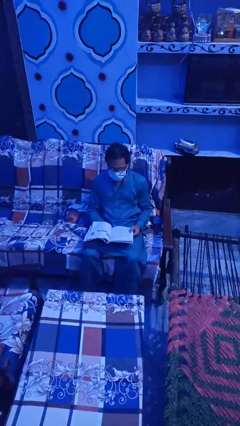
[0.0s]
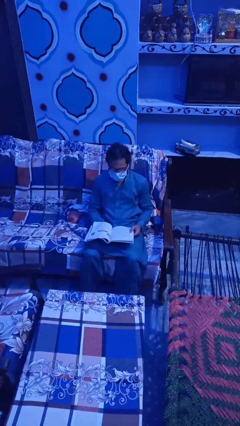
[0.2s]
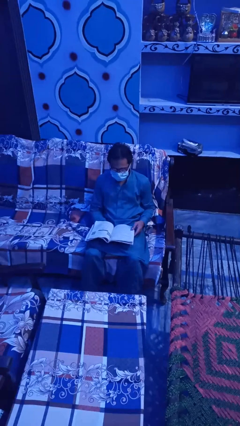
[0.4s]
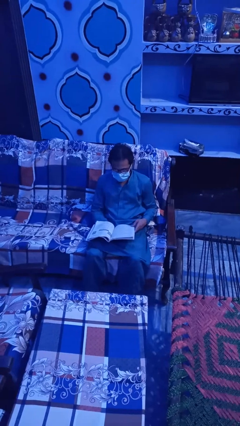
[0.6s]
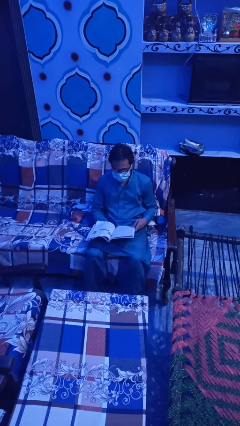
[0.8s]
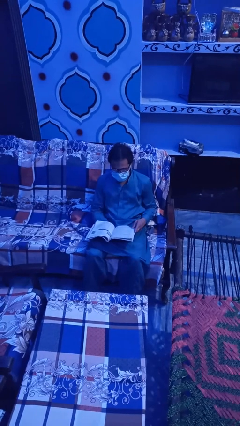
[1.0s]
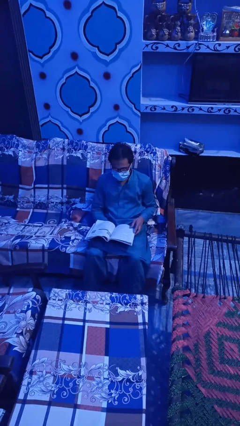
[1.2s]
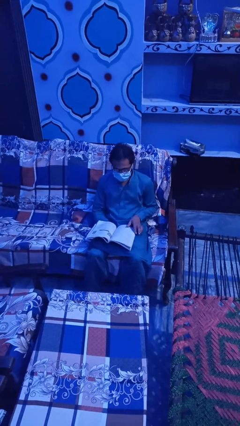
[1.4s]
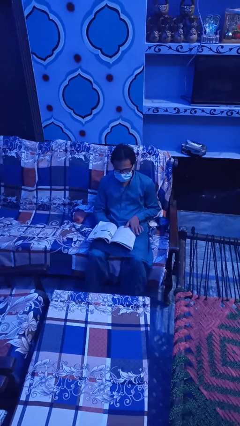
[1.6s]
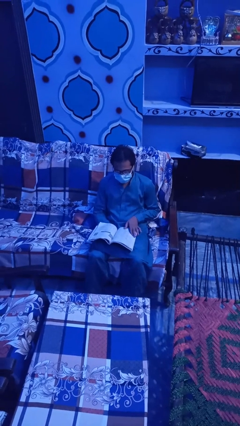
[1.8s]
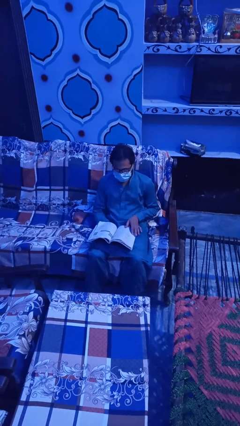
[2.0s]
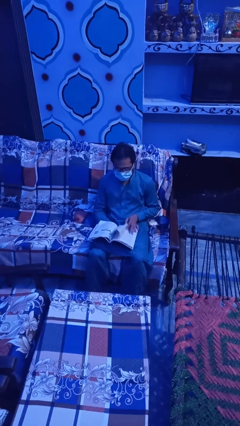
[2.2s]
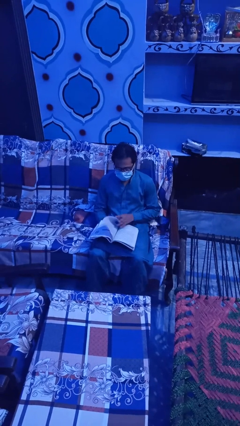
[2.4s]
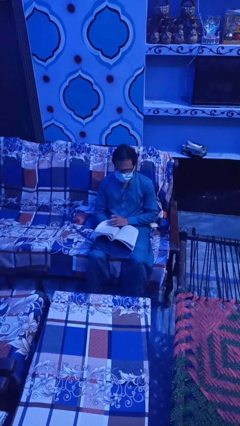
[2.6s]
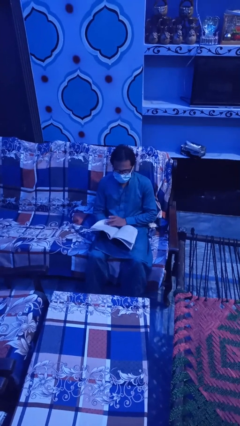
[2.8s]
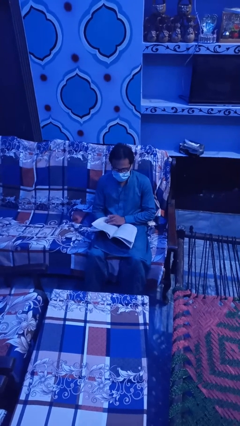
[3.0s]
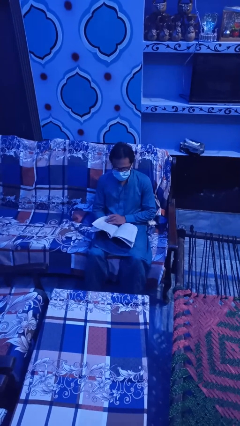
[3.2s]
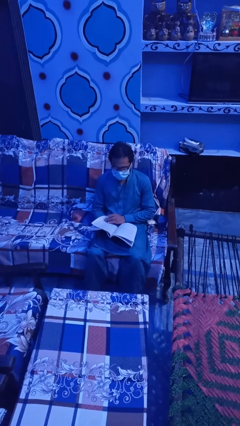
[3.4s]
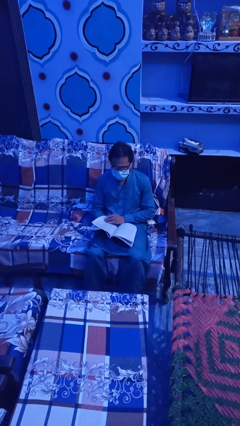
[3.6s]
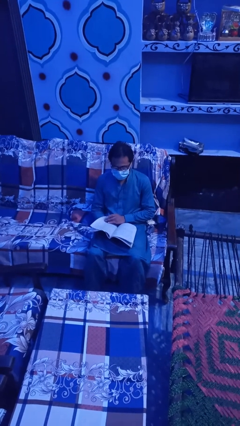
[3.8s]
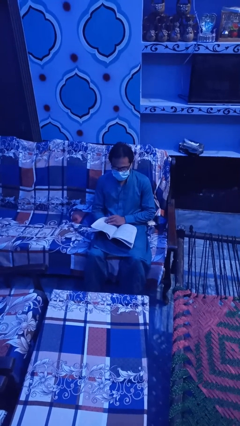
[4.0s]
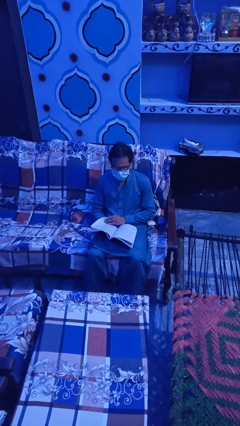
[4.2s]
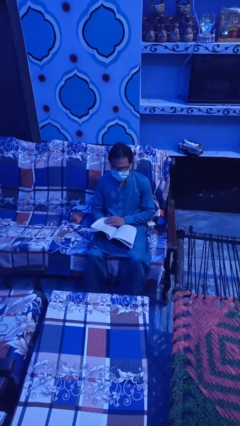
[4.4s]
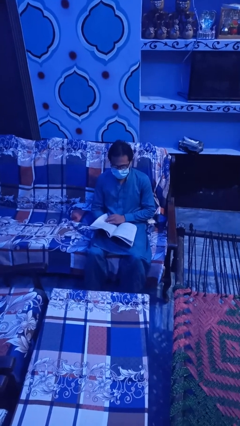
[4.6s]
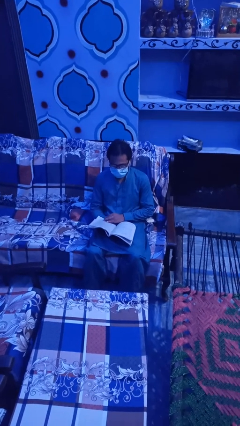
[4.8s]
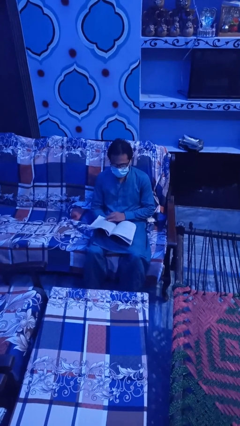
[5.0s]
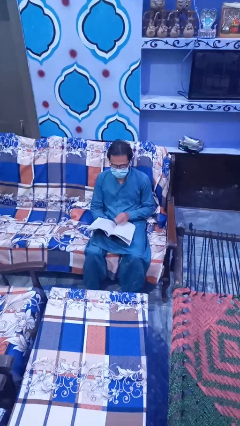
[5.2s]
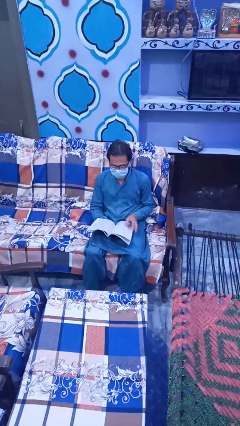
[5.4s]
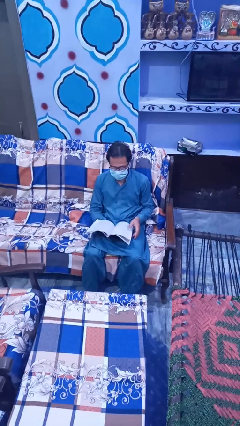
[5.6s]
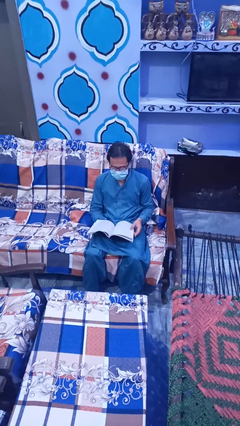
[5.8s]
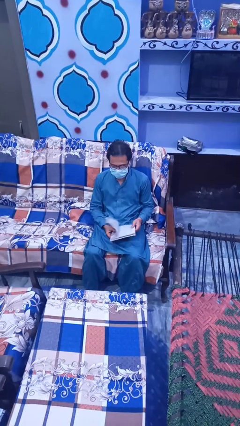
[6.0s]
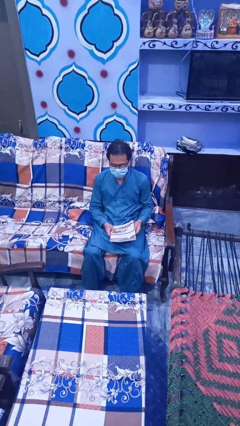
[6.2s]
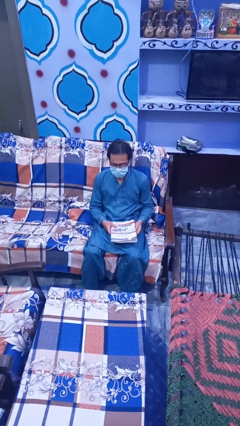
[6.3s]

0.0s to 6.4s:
person reads magazine

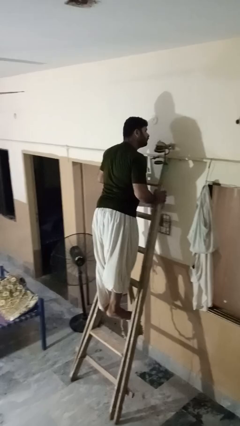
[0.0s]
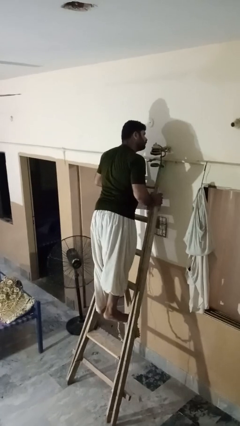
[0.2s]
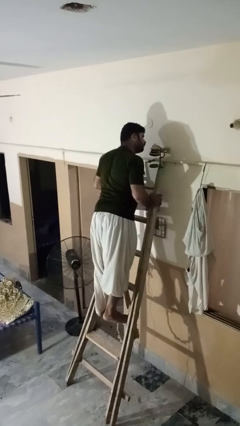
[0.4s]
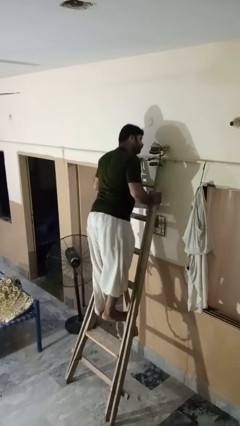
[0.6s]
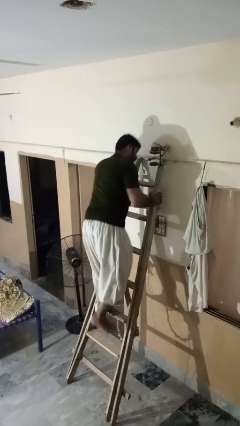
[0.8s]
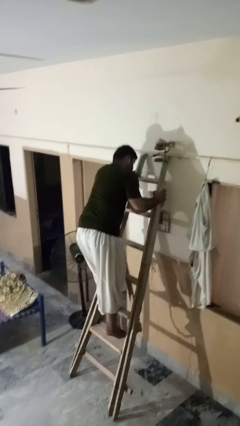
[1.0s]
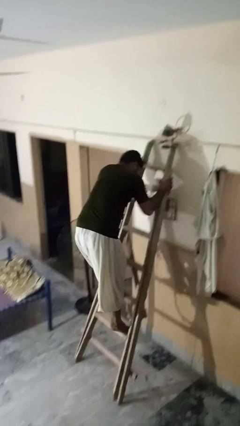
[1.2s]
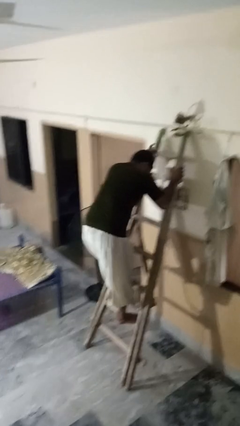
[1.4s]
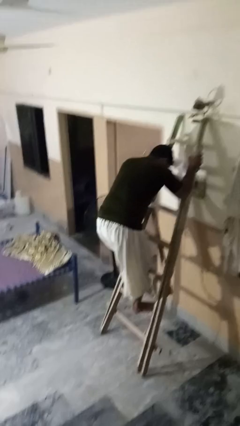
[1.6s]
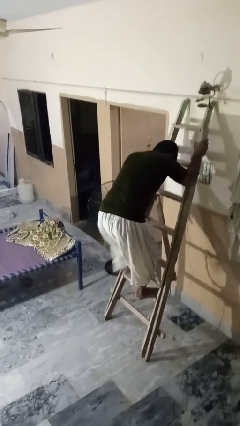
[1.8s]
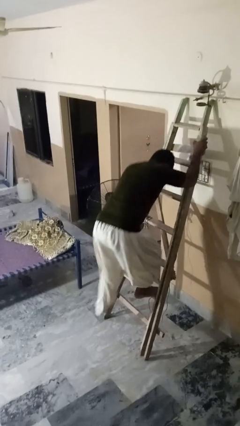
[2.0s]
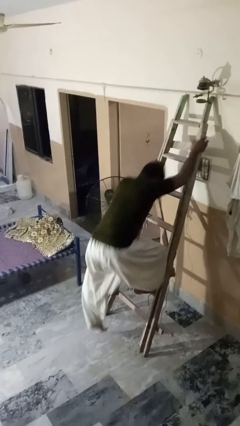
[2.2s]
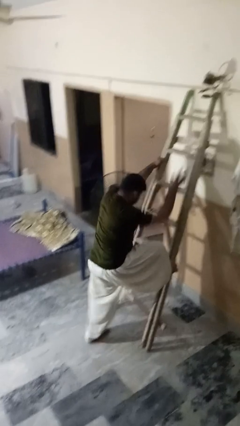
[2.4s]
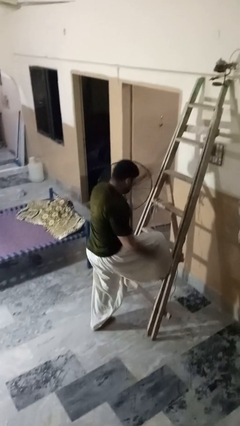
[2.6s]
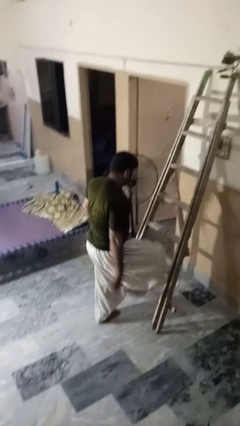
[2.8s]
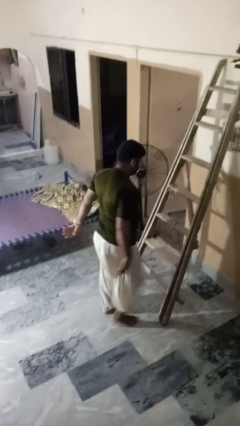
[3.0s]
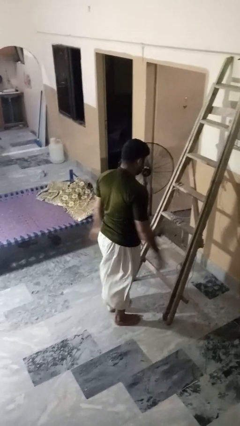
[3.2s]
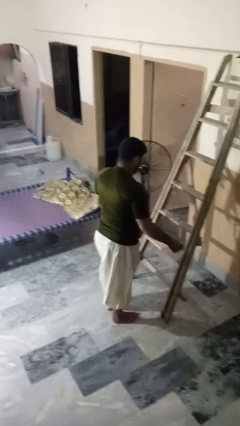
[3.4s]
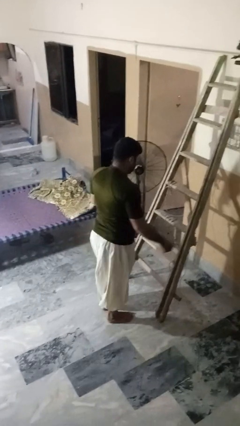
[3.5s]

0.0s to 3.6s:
person climbs down ladder

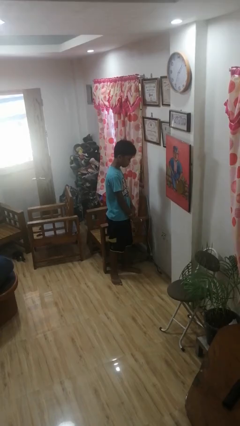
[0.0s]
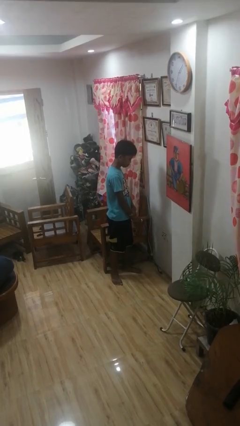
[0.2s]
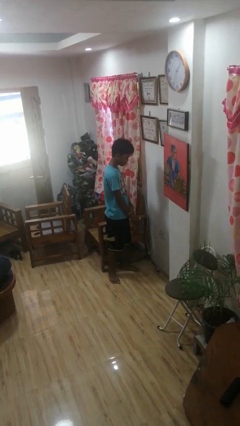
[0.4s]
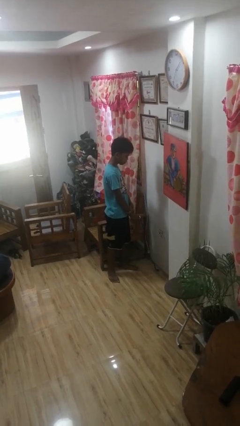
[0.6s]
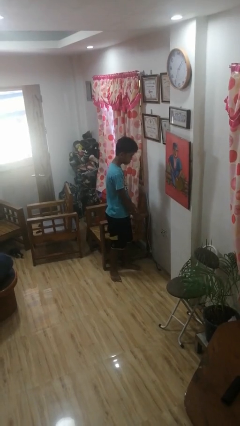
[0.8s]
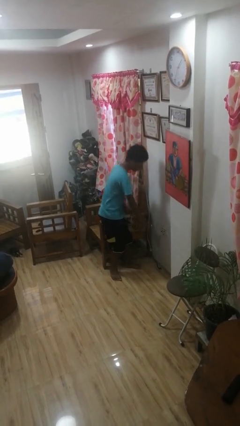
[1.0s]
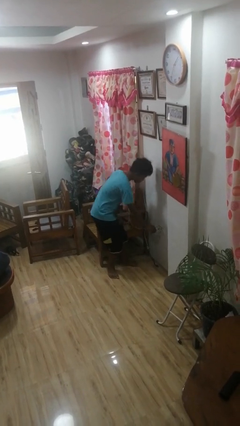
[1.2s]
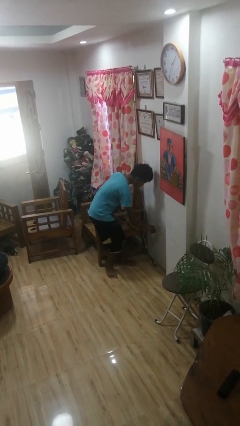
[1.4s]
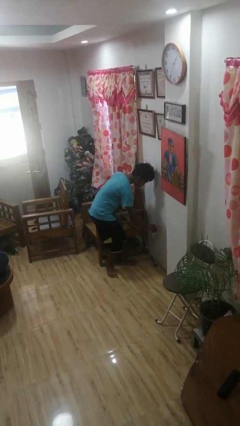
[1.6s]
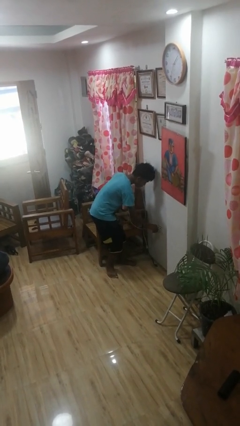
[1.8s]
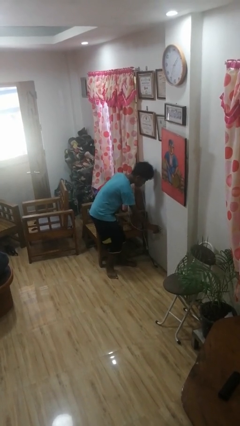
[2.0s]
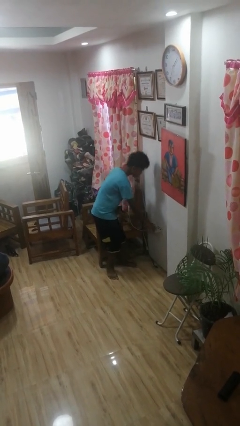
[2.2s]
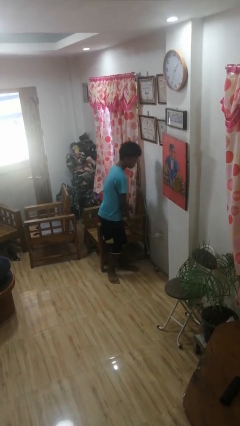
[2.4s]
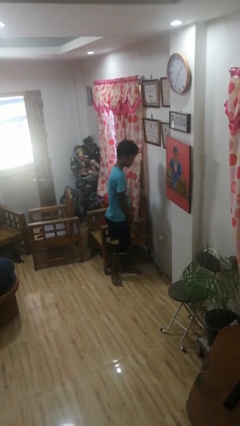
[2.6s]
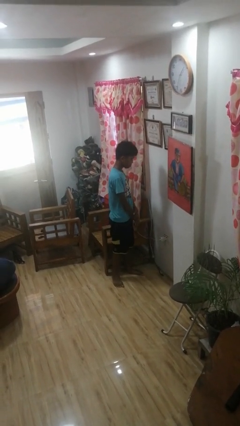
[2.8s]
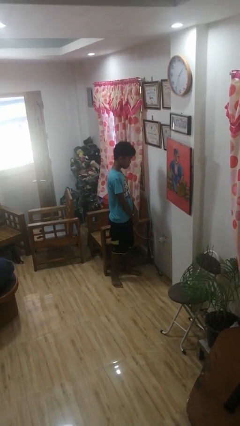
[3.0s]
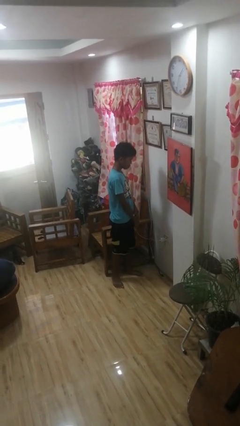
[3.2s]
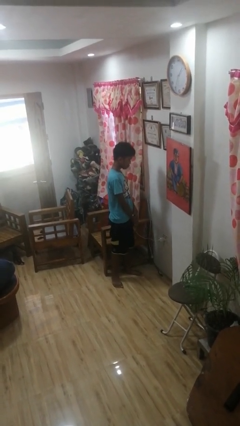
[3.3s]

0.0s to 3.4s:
person plugs into electrical socket

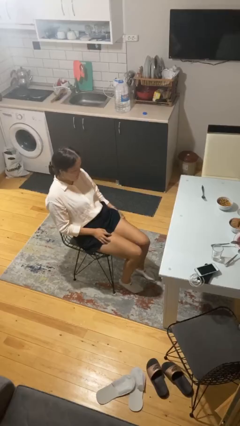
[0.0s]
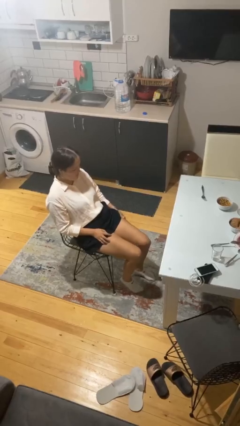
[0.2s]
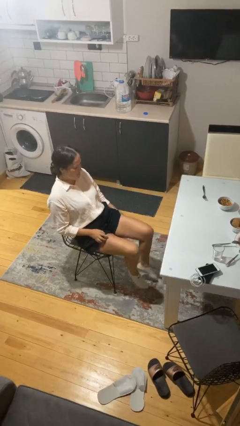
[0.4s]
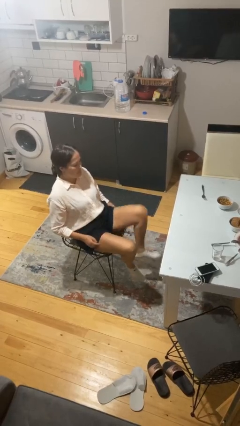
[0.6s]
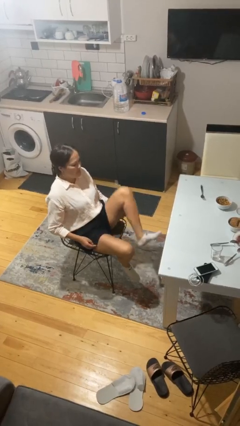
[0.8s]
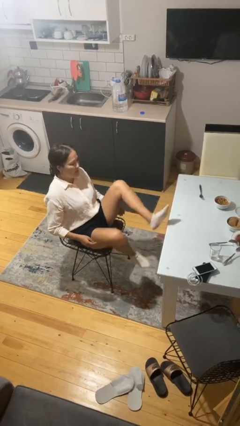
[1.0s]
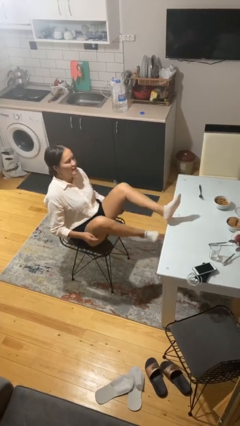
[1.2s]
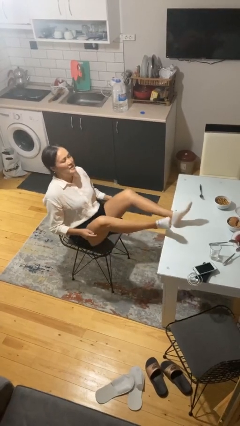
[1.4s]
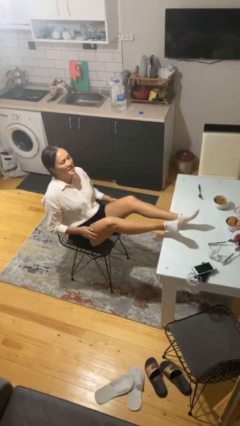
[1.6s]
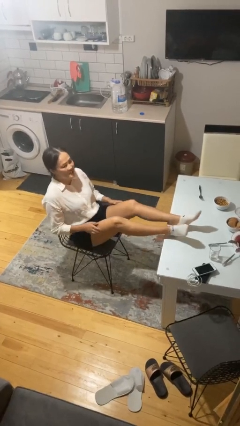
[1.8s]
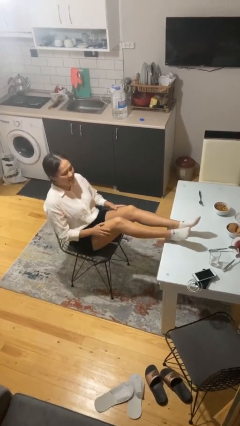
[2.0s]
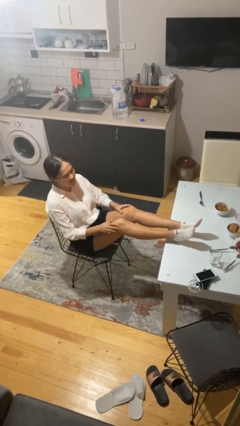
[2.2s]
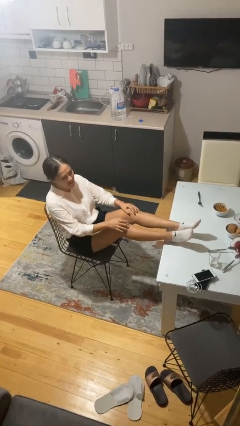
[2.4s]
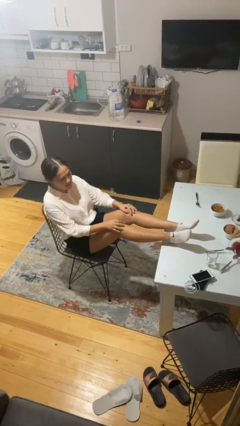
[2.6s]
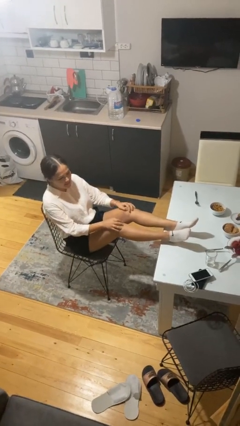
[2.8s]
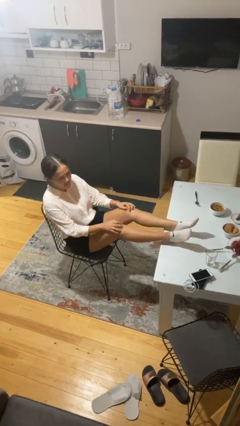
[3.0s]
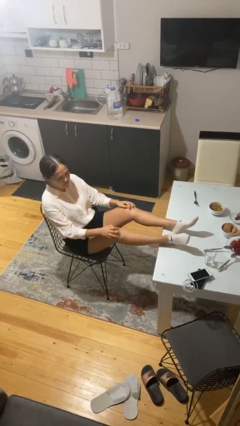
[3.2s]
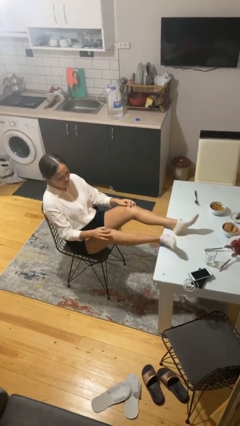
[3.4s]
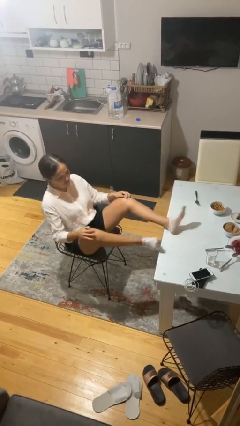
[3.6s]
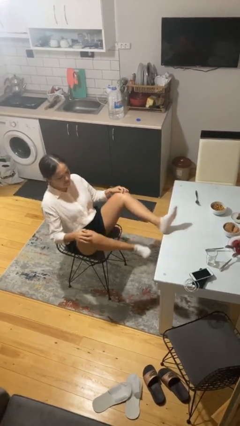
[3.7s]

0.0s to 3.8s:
person puts feet up

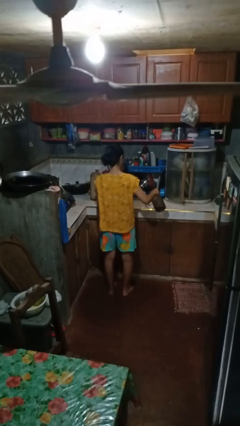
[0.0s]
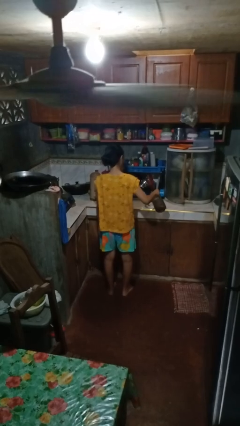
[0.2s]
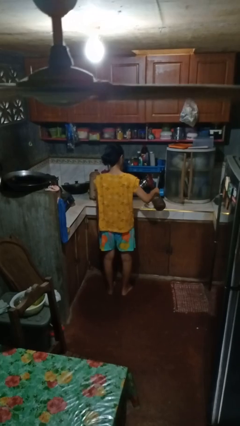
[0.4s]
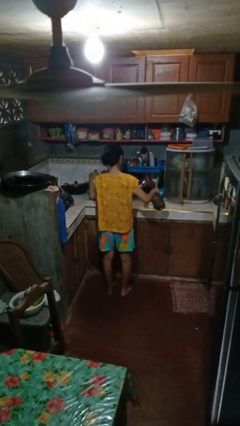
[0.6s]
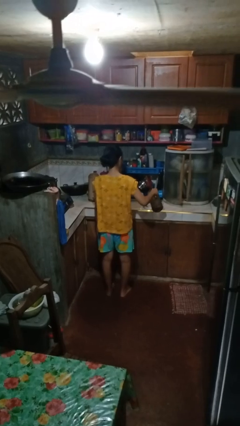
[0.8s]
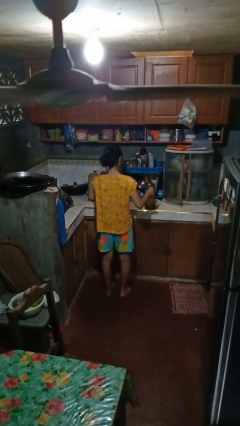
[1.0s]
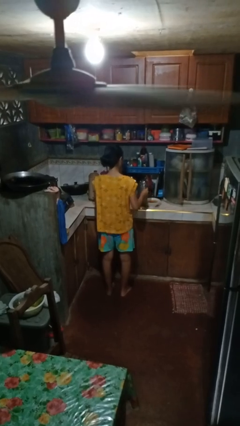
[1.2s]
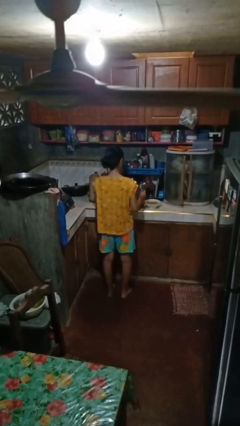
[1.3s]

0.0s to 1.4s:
person pours into bowl
